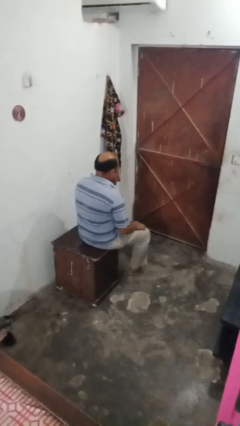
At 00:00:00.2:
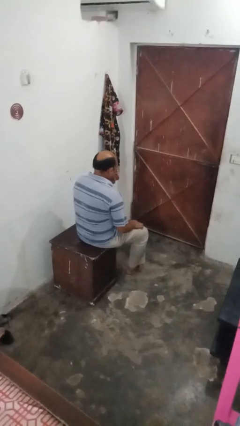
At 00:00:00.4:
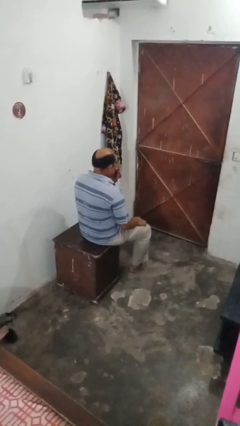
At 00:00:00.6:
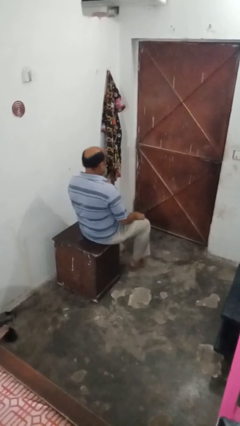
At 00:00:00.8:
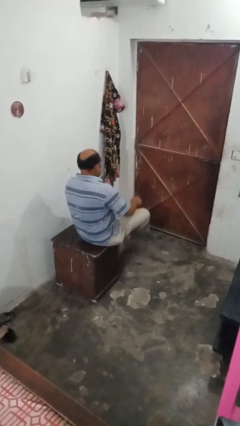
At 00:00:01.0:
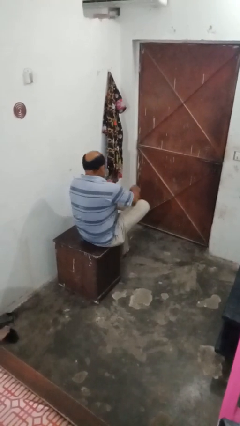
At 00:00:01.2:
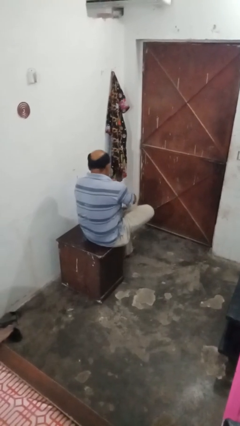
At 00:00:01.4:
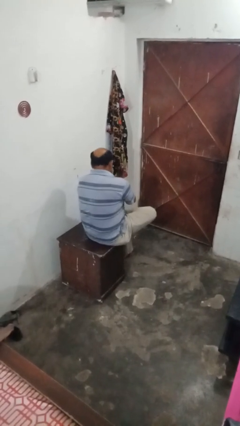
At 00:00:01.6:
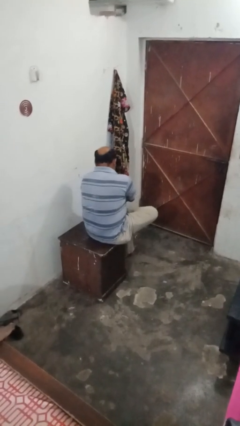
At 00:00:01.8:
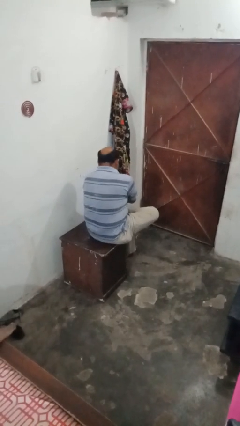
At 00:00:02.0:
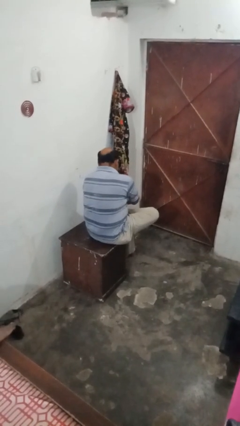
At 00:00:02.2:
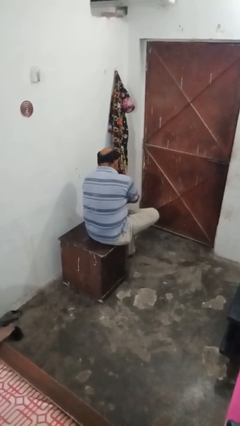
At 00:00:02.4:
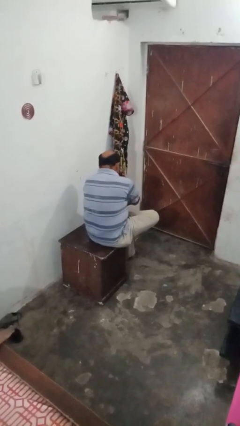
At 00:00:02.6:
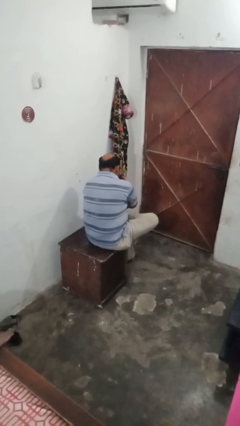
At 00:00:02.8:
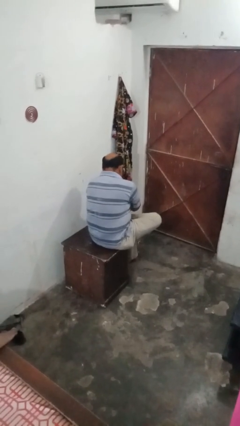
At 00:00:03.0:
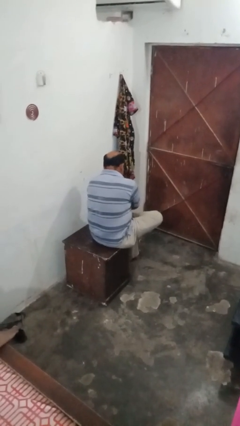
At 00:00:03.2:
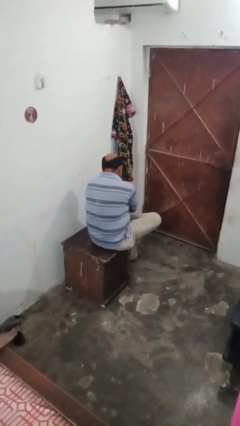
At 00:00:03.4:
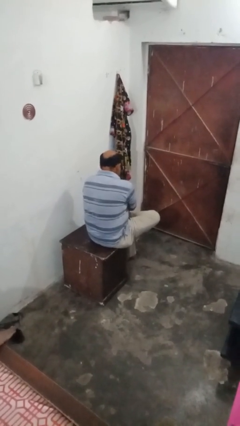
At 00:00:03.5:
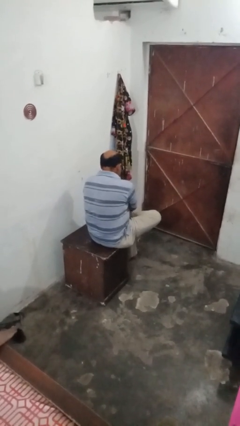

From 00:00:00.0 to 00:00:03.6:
person rubs foot

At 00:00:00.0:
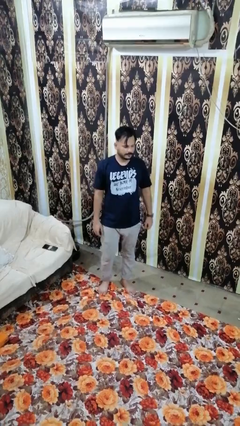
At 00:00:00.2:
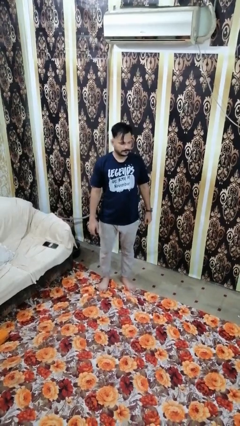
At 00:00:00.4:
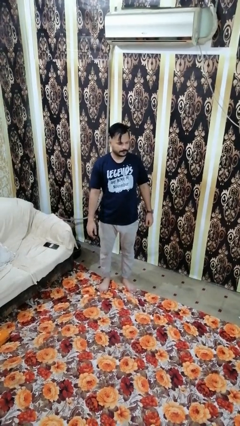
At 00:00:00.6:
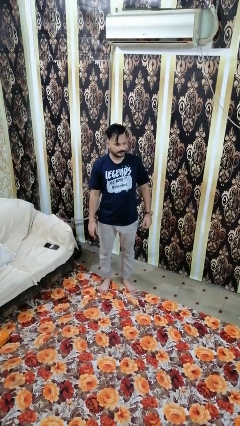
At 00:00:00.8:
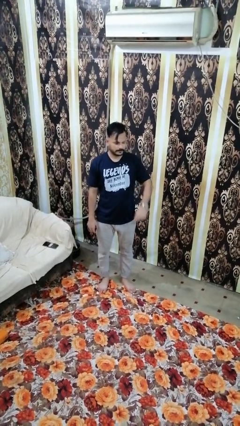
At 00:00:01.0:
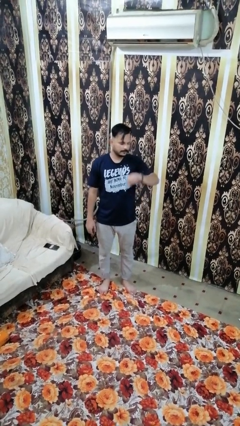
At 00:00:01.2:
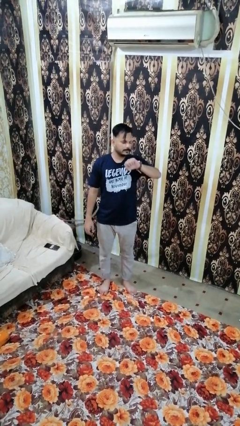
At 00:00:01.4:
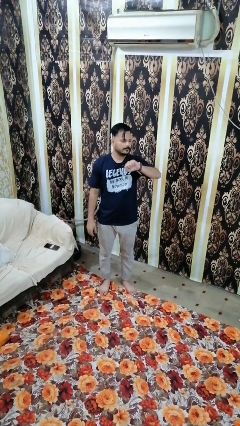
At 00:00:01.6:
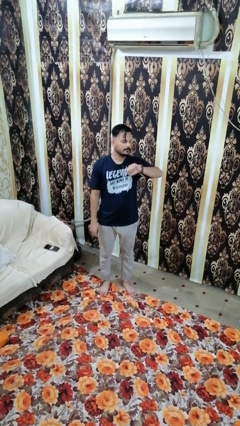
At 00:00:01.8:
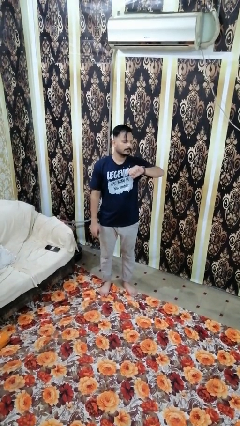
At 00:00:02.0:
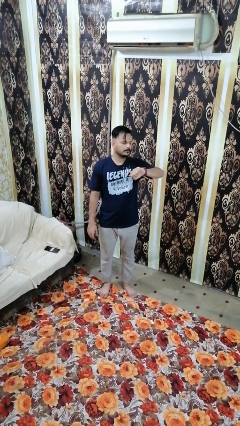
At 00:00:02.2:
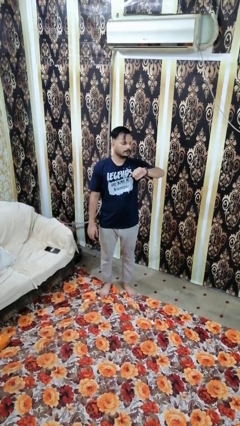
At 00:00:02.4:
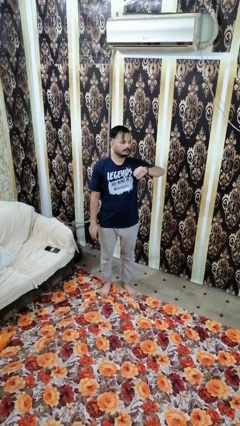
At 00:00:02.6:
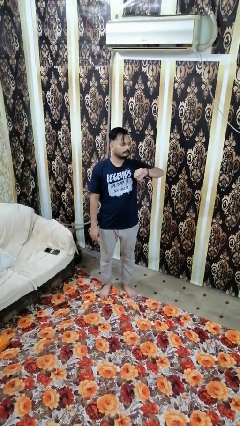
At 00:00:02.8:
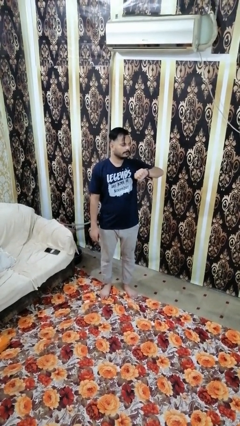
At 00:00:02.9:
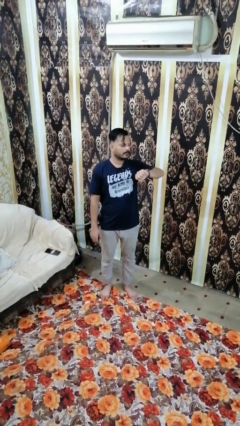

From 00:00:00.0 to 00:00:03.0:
person looks at wristwatch

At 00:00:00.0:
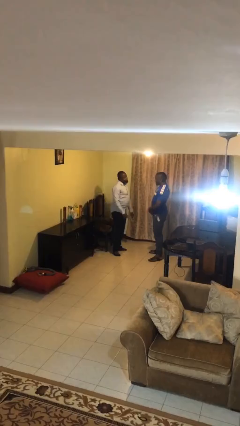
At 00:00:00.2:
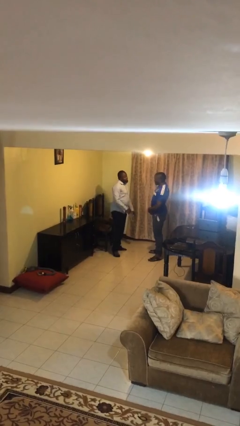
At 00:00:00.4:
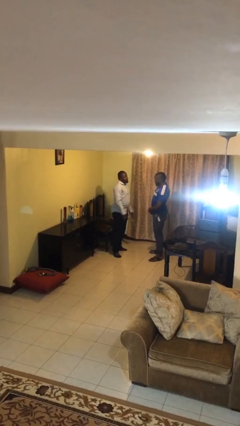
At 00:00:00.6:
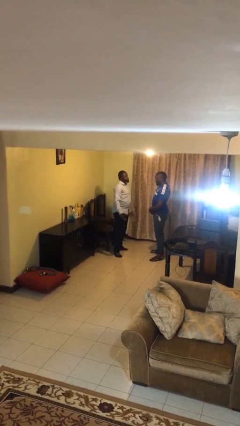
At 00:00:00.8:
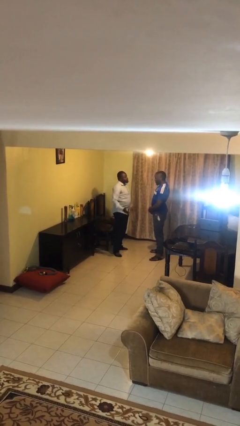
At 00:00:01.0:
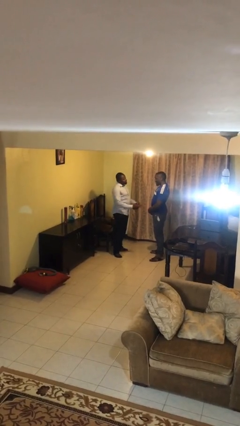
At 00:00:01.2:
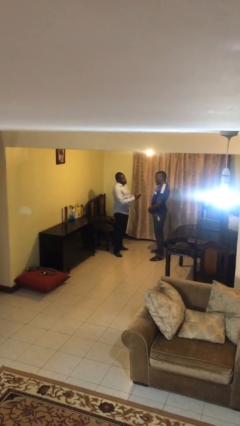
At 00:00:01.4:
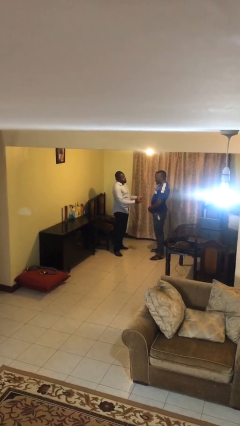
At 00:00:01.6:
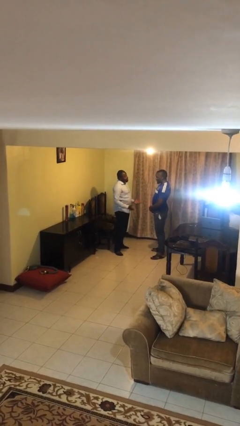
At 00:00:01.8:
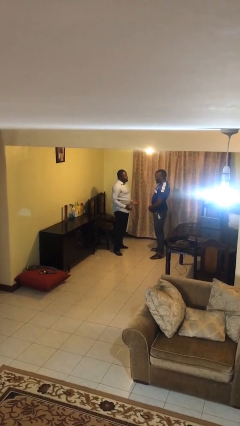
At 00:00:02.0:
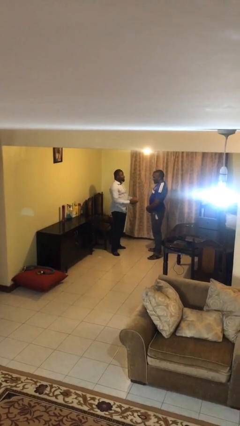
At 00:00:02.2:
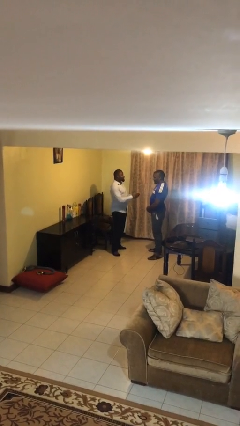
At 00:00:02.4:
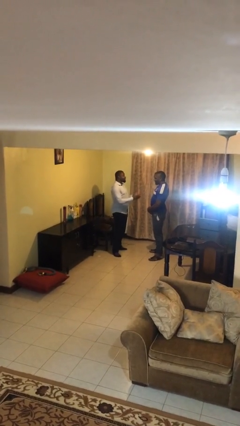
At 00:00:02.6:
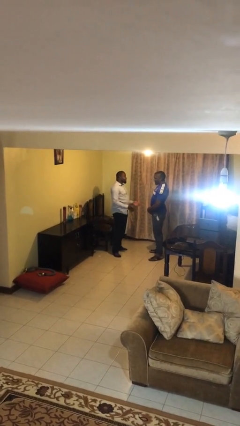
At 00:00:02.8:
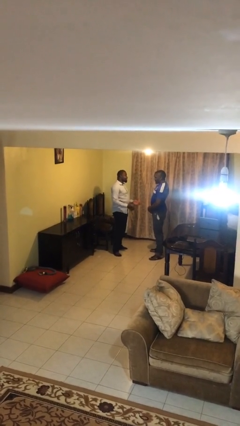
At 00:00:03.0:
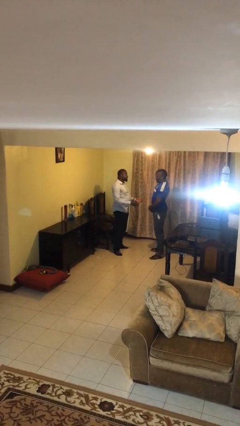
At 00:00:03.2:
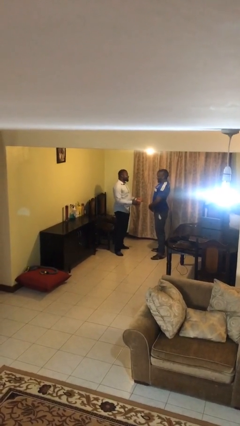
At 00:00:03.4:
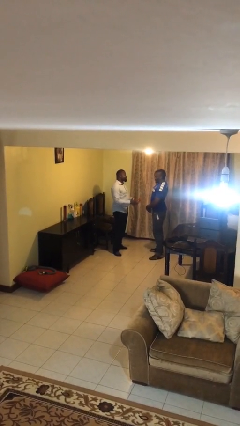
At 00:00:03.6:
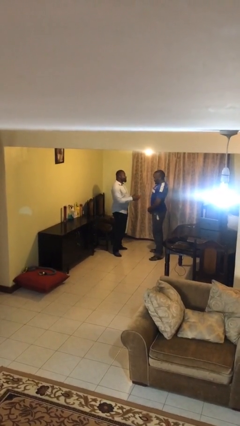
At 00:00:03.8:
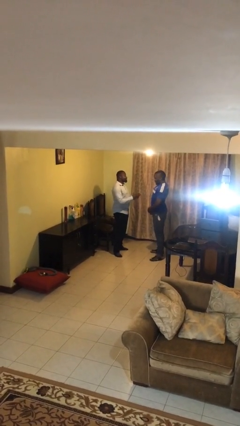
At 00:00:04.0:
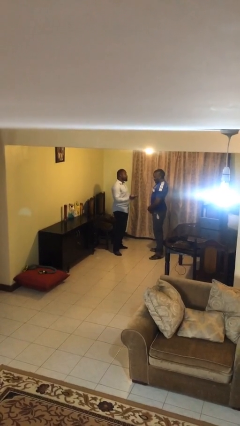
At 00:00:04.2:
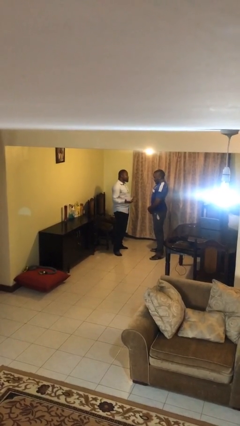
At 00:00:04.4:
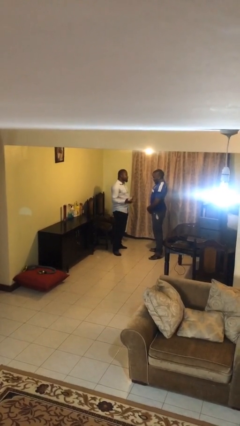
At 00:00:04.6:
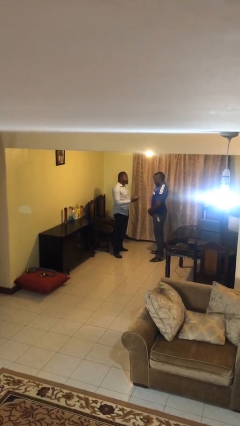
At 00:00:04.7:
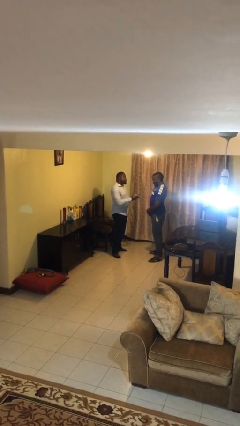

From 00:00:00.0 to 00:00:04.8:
person talks to person

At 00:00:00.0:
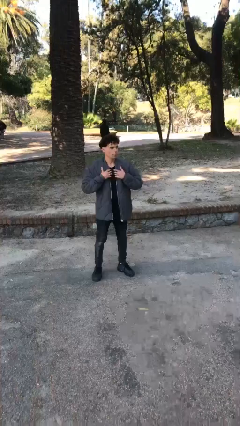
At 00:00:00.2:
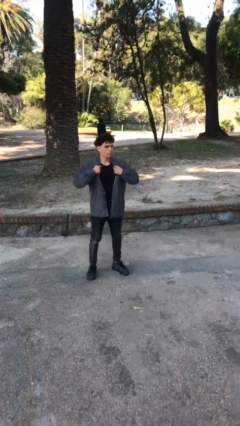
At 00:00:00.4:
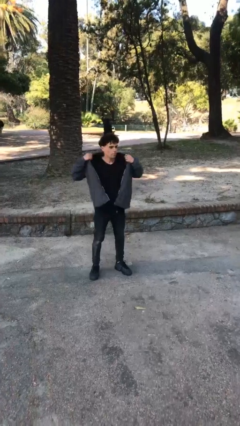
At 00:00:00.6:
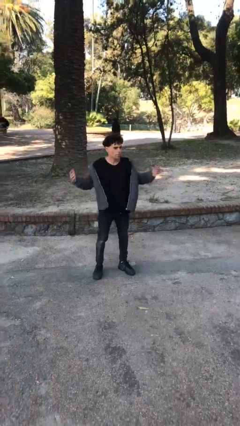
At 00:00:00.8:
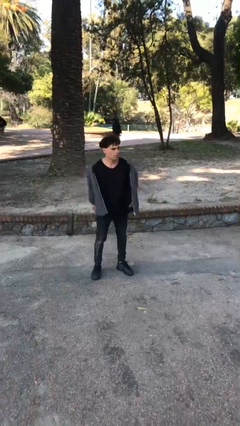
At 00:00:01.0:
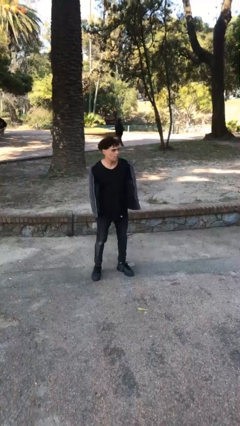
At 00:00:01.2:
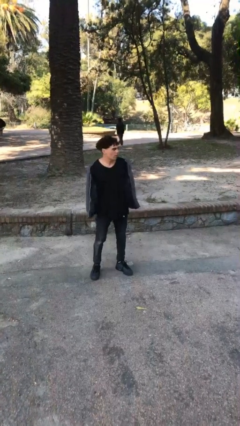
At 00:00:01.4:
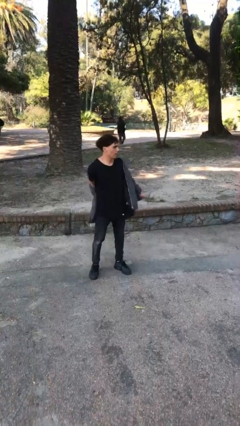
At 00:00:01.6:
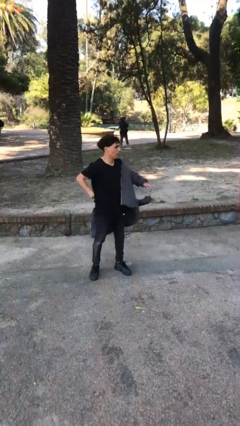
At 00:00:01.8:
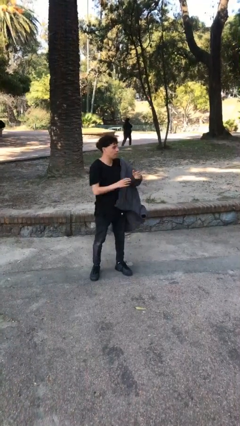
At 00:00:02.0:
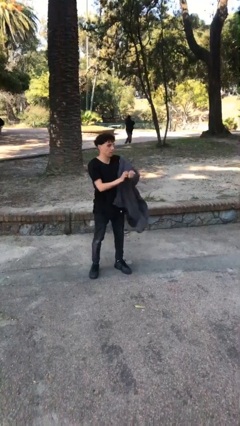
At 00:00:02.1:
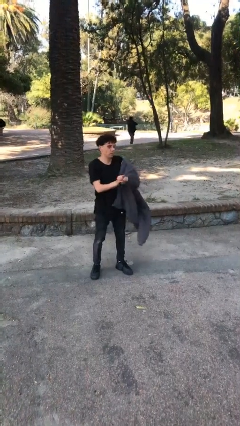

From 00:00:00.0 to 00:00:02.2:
person takes off jacket

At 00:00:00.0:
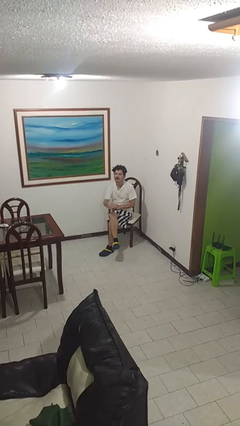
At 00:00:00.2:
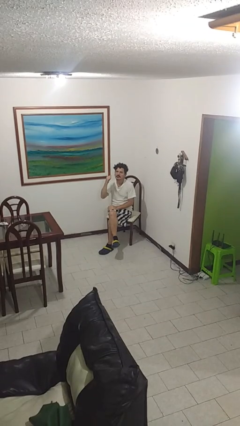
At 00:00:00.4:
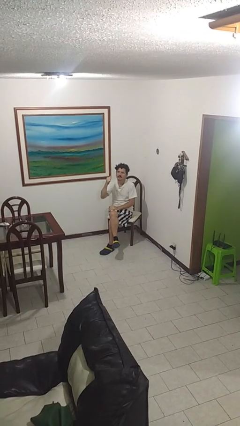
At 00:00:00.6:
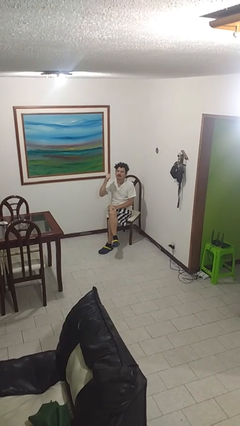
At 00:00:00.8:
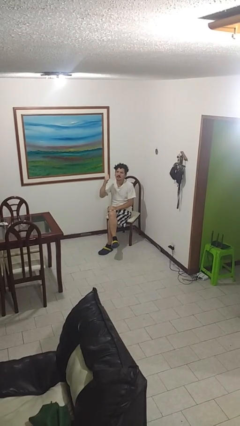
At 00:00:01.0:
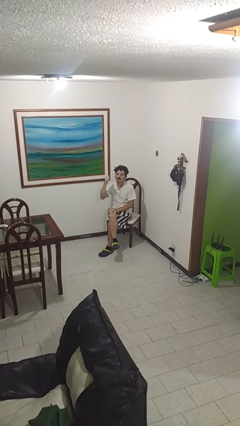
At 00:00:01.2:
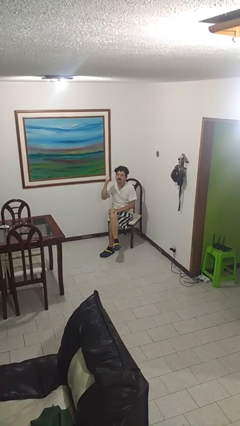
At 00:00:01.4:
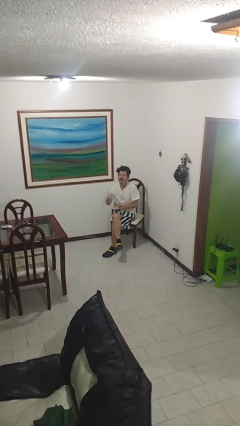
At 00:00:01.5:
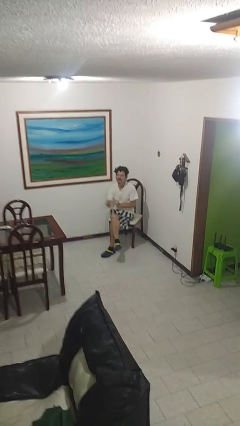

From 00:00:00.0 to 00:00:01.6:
person gestures behind me

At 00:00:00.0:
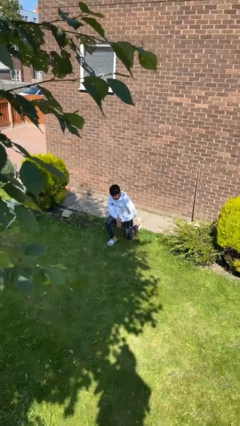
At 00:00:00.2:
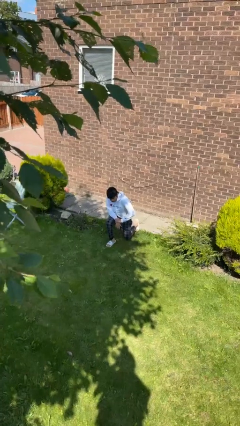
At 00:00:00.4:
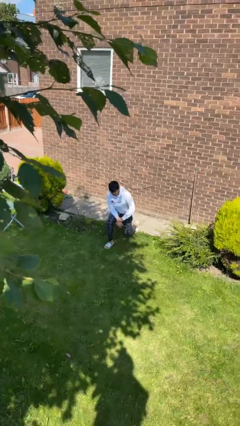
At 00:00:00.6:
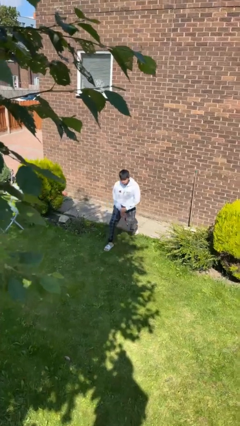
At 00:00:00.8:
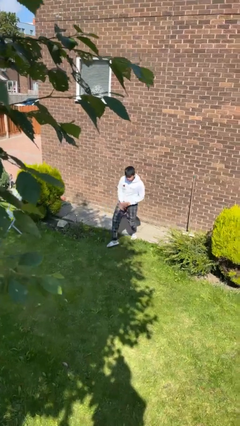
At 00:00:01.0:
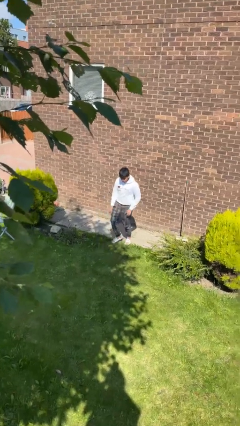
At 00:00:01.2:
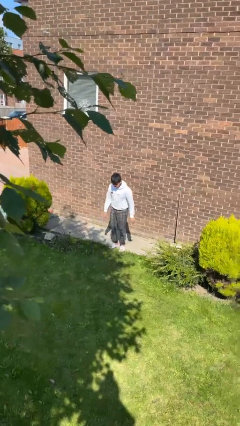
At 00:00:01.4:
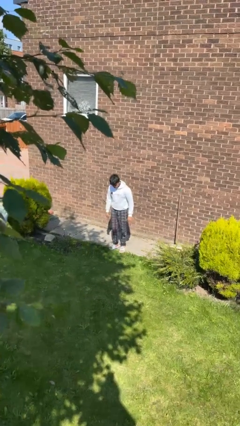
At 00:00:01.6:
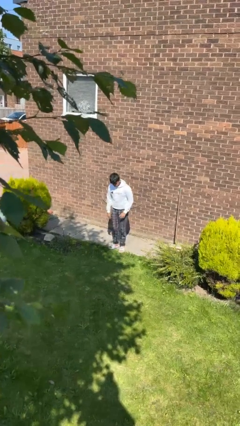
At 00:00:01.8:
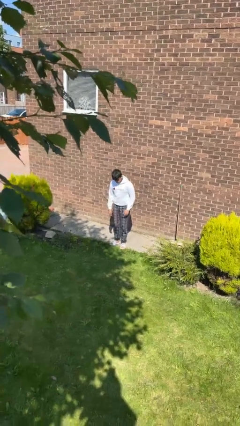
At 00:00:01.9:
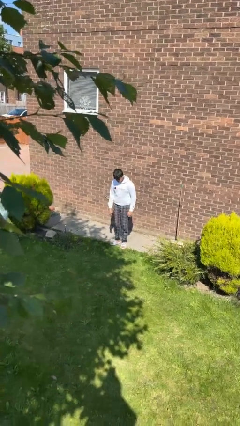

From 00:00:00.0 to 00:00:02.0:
person stands up from floor
